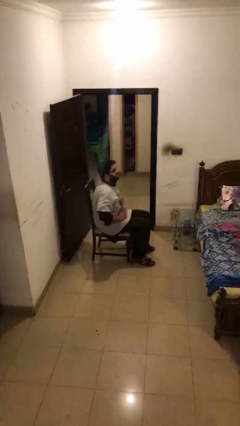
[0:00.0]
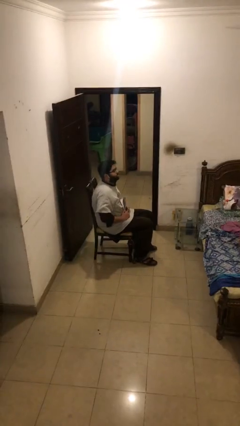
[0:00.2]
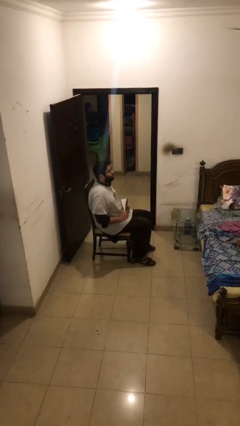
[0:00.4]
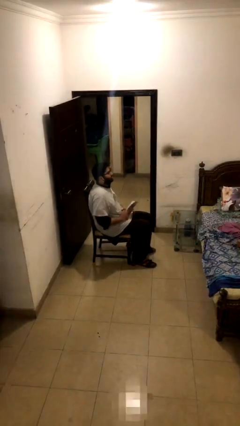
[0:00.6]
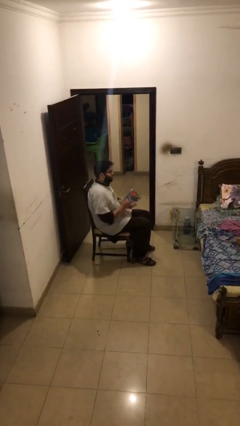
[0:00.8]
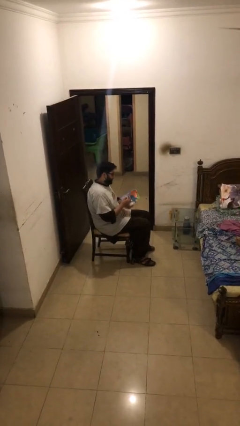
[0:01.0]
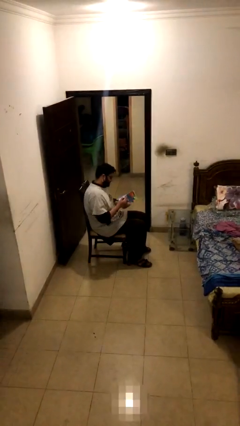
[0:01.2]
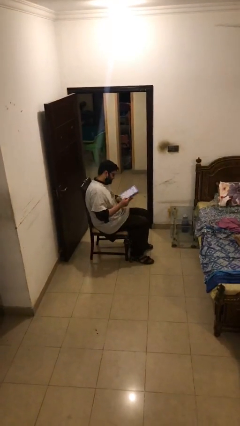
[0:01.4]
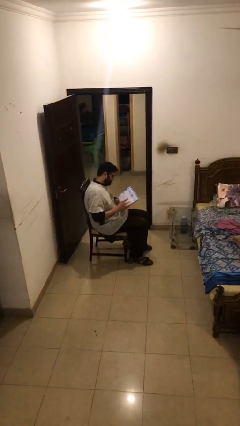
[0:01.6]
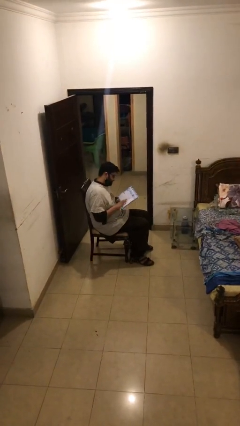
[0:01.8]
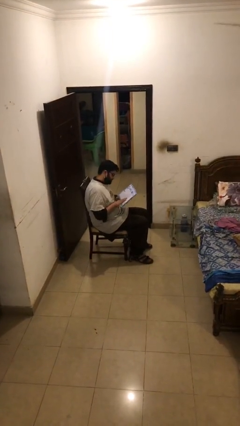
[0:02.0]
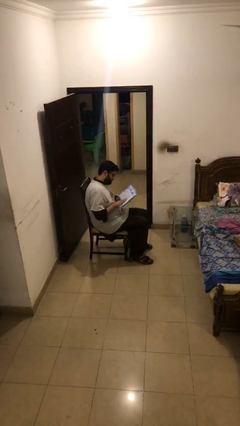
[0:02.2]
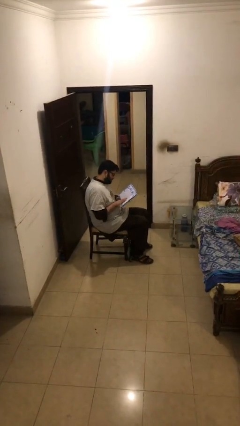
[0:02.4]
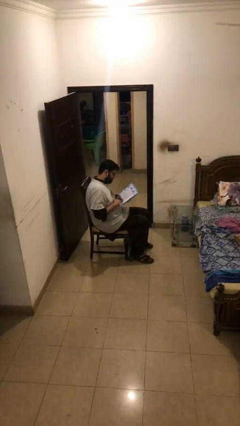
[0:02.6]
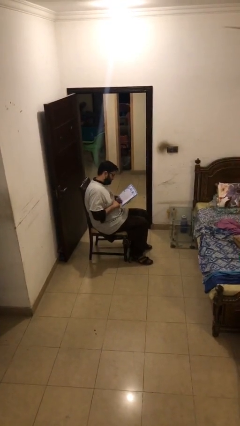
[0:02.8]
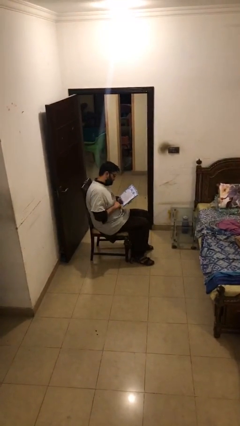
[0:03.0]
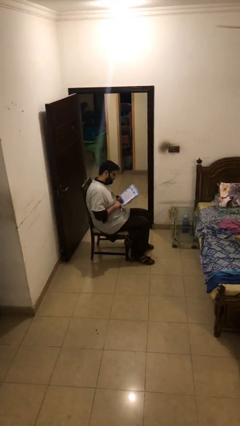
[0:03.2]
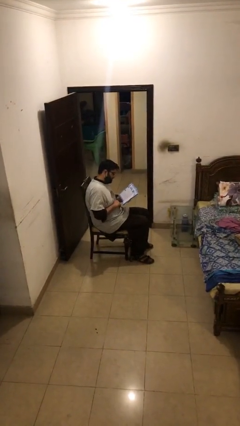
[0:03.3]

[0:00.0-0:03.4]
person reads document

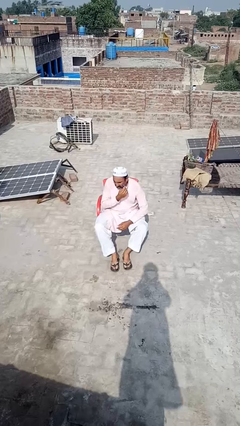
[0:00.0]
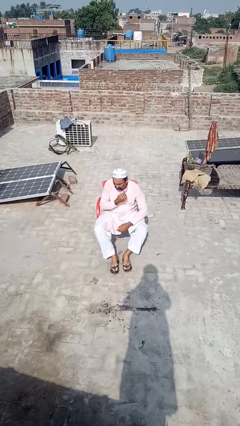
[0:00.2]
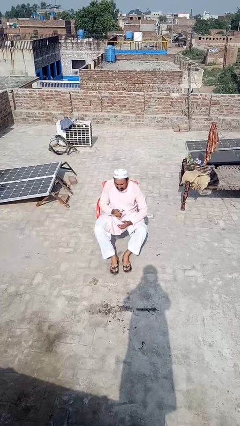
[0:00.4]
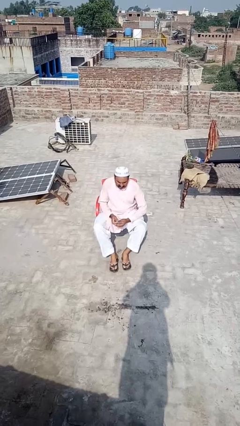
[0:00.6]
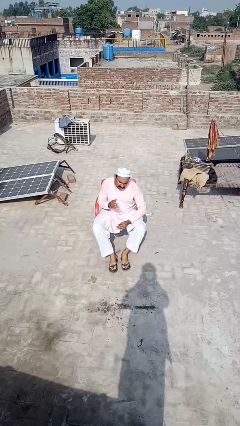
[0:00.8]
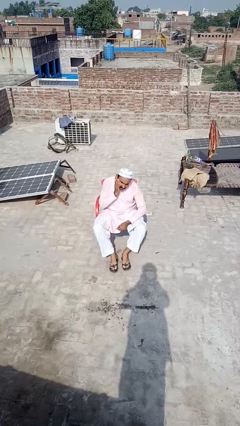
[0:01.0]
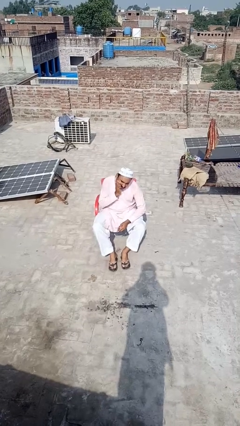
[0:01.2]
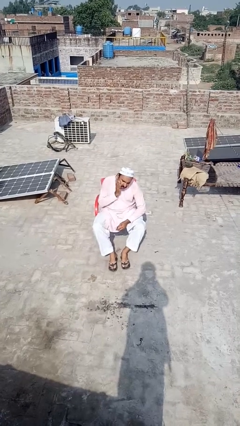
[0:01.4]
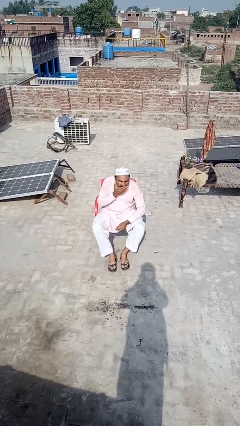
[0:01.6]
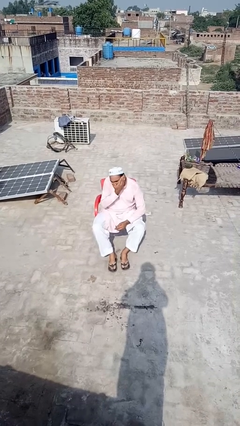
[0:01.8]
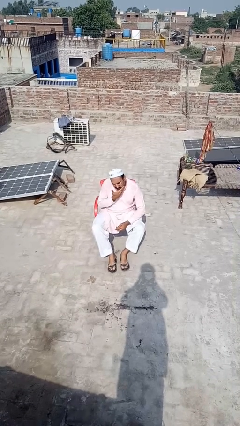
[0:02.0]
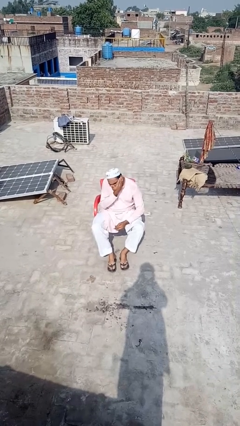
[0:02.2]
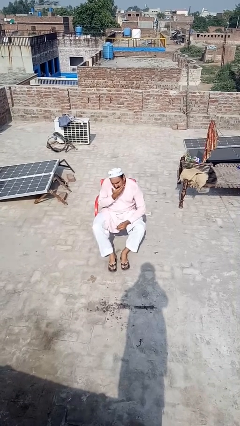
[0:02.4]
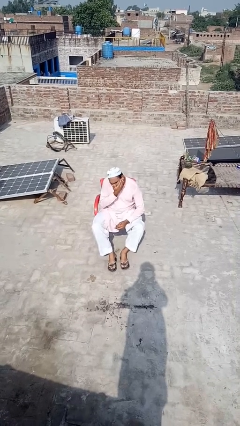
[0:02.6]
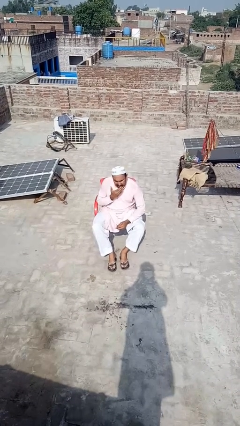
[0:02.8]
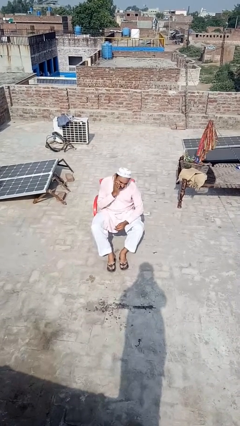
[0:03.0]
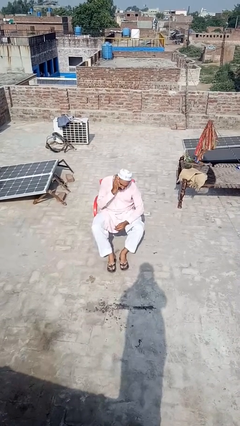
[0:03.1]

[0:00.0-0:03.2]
person applies shaving cream

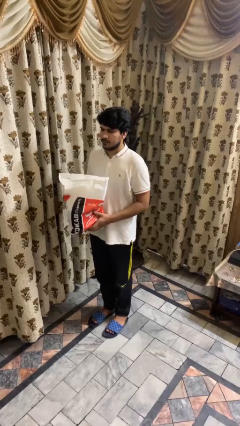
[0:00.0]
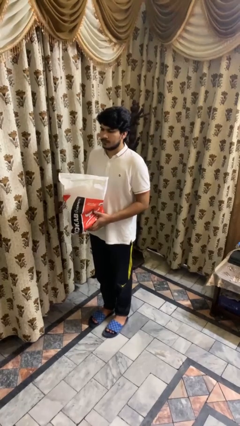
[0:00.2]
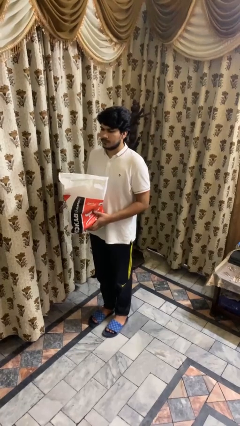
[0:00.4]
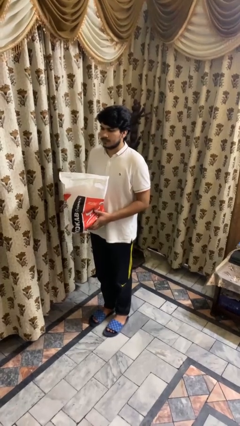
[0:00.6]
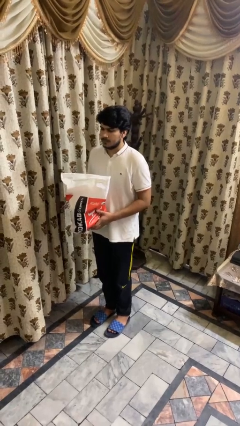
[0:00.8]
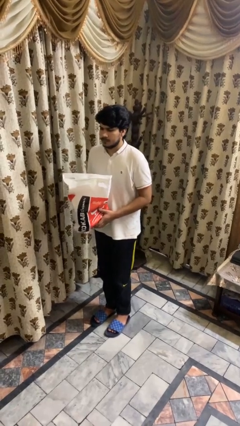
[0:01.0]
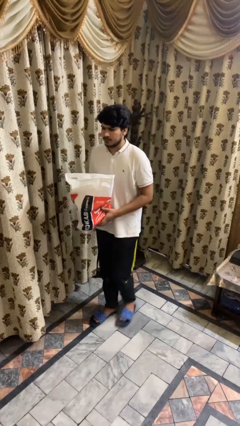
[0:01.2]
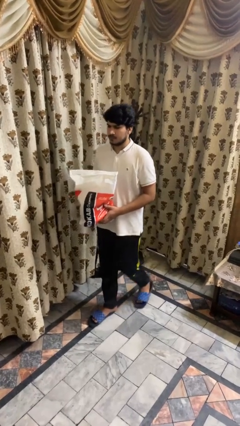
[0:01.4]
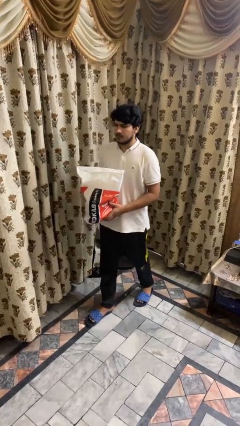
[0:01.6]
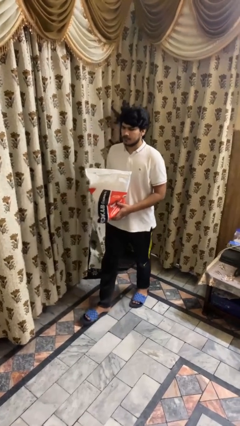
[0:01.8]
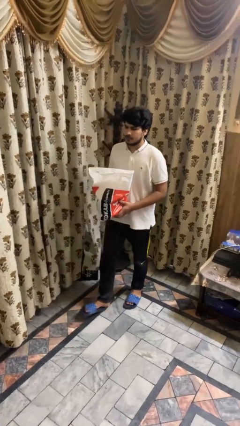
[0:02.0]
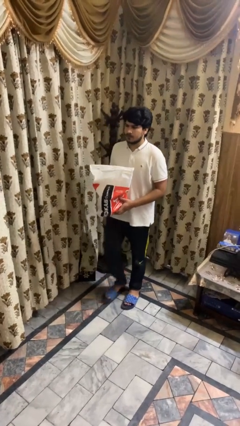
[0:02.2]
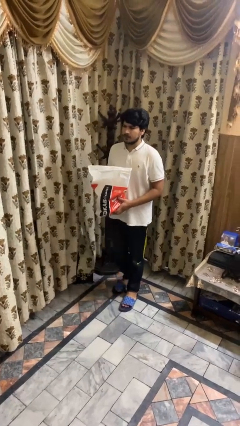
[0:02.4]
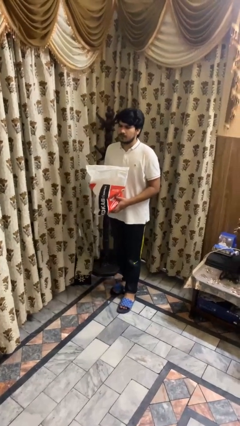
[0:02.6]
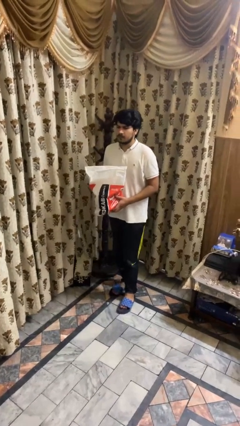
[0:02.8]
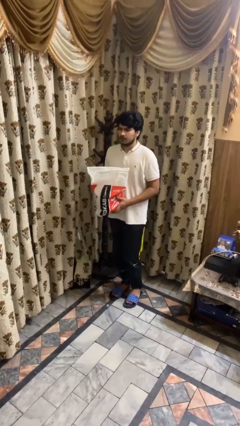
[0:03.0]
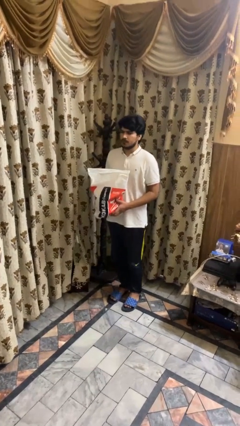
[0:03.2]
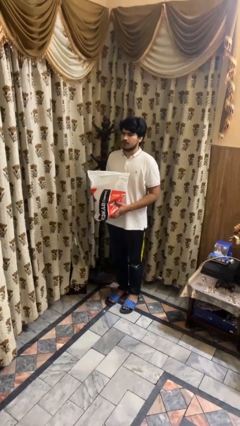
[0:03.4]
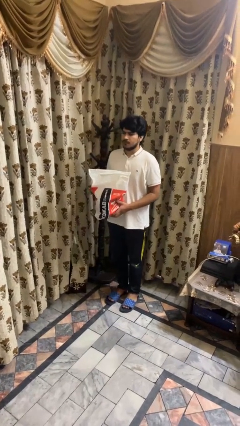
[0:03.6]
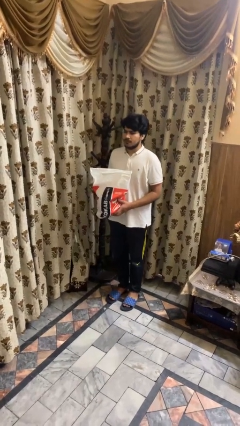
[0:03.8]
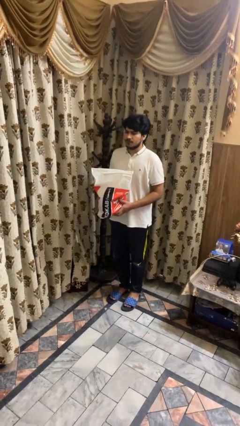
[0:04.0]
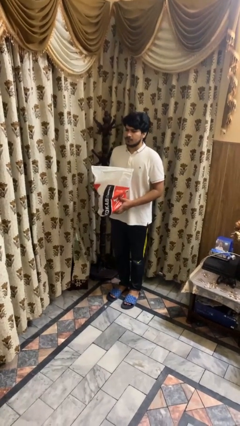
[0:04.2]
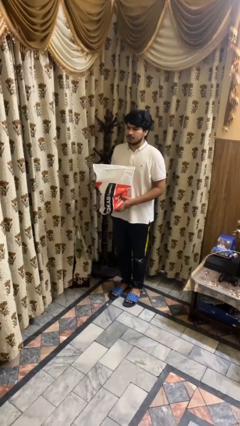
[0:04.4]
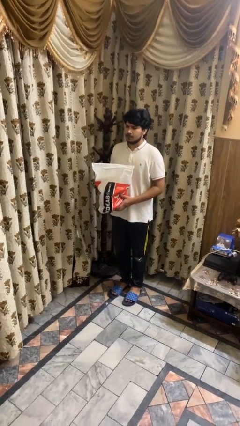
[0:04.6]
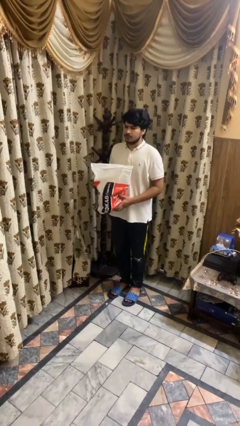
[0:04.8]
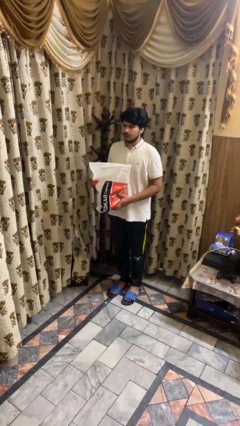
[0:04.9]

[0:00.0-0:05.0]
person carries groceries

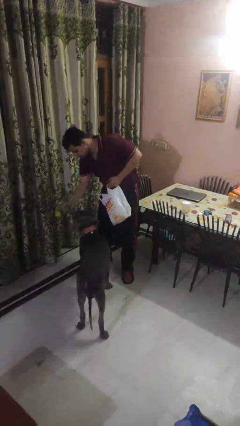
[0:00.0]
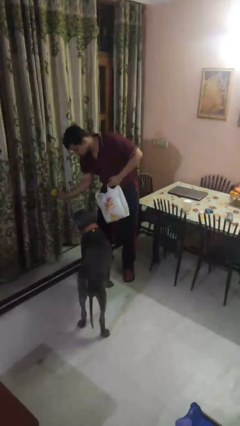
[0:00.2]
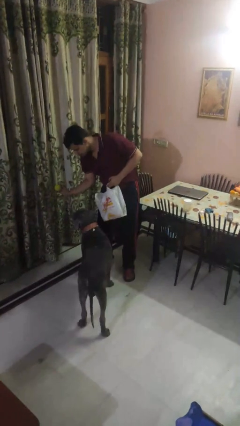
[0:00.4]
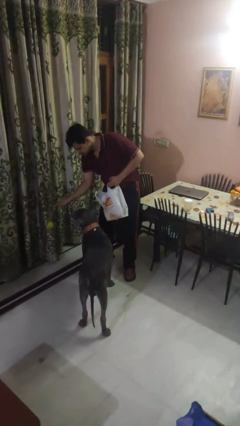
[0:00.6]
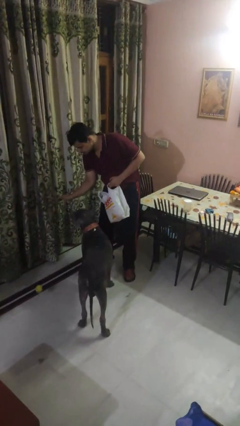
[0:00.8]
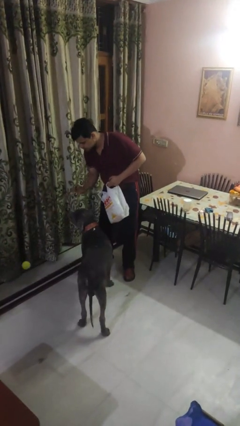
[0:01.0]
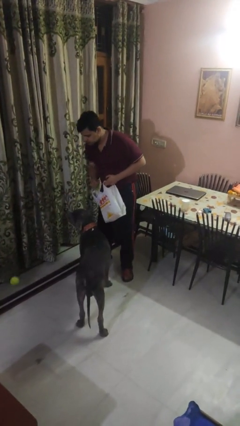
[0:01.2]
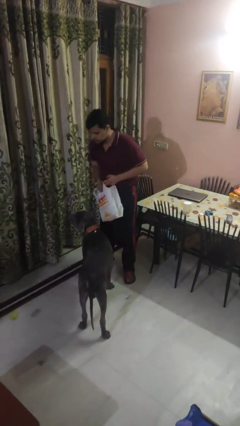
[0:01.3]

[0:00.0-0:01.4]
person throws object to dog

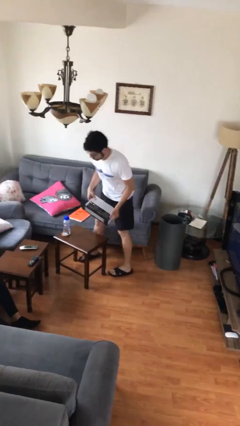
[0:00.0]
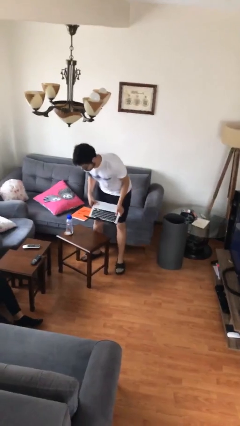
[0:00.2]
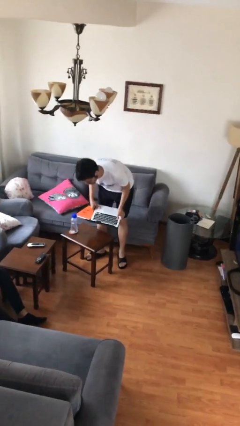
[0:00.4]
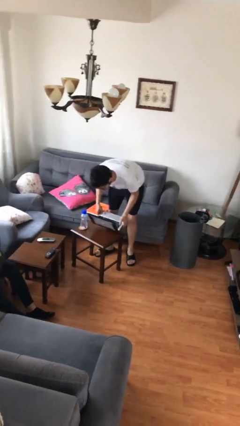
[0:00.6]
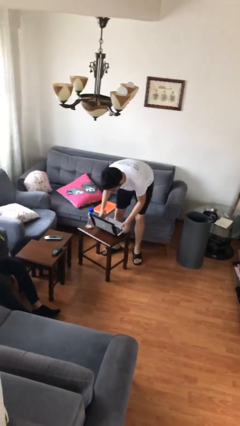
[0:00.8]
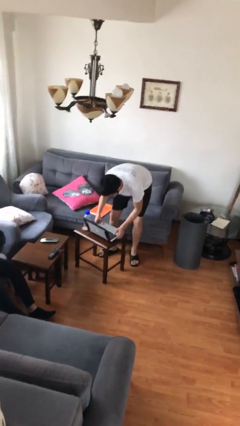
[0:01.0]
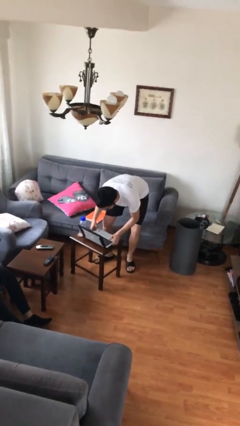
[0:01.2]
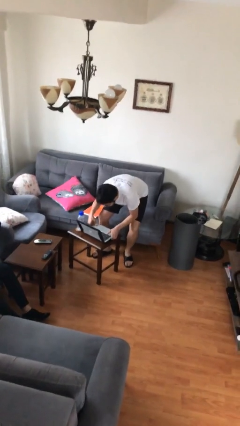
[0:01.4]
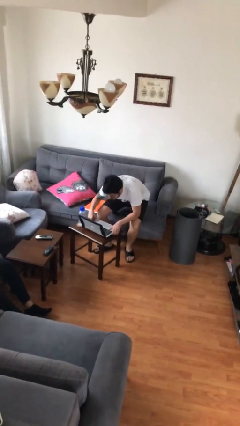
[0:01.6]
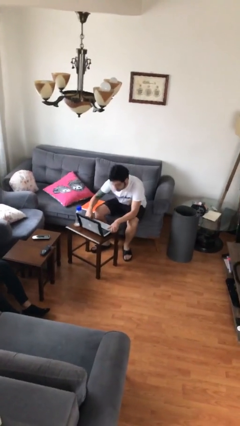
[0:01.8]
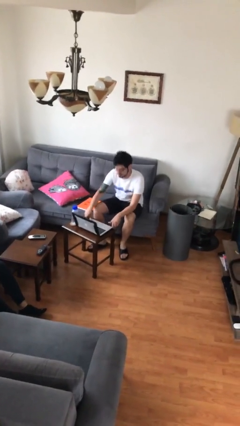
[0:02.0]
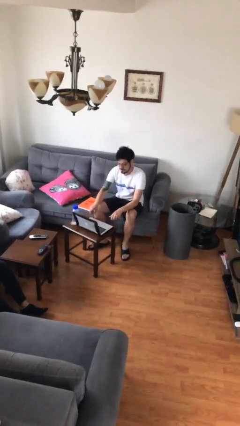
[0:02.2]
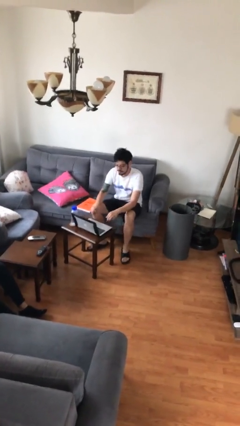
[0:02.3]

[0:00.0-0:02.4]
person sits down

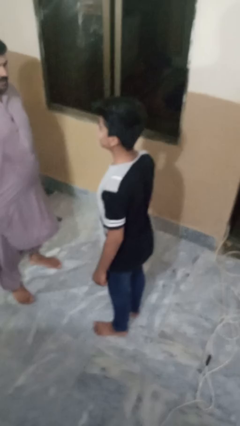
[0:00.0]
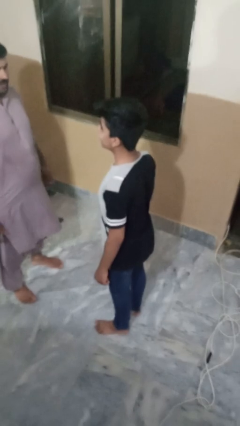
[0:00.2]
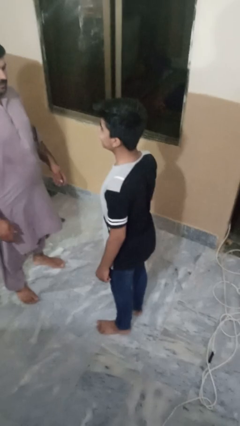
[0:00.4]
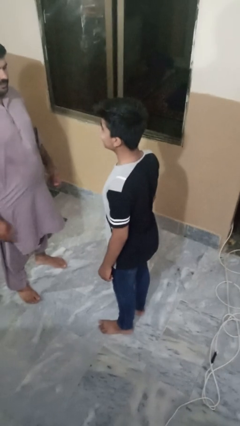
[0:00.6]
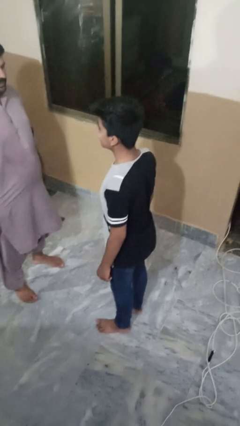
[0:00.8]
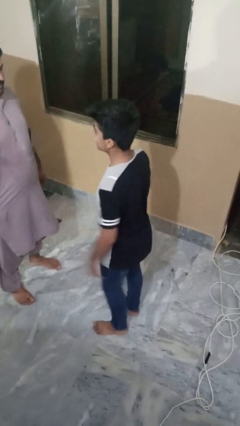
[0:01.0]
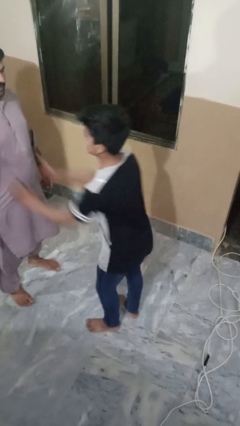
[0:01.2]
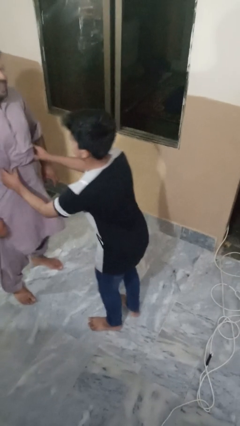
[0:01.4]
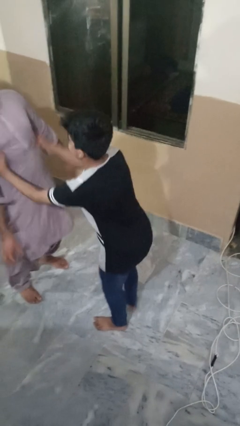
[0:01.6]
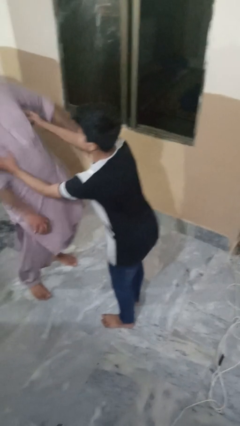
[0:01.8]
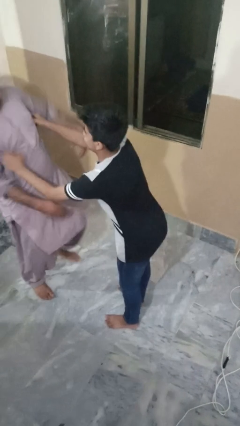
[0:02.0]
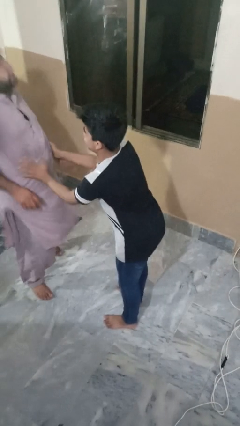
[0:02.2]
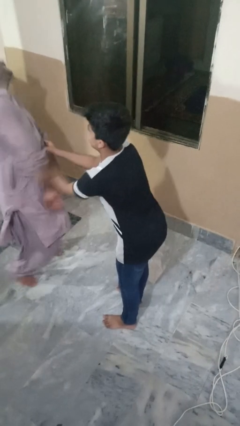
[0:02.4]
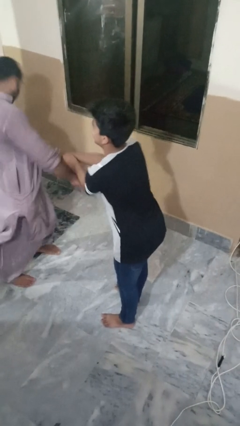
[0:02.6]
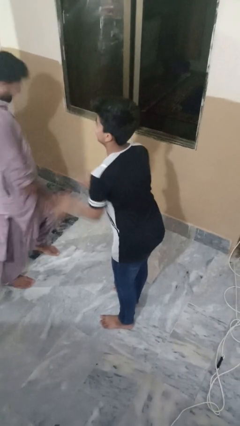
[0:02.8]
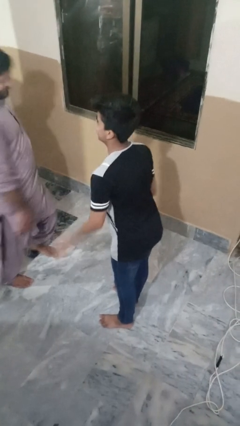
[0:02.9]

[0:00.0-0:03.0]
person tickles person
